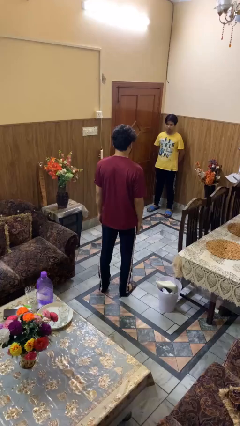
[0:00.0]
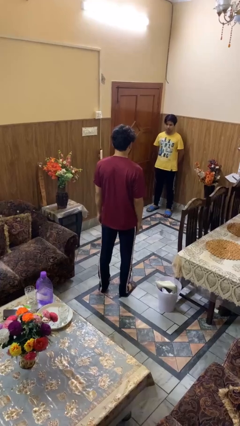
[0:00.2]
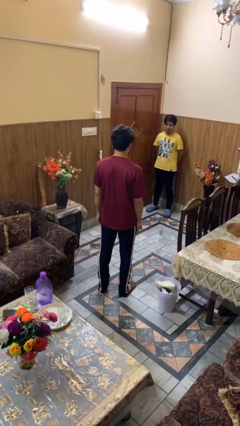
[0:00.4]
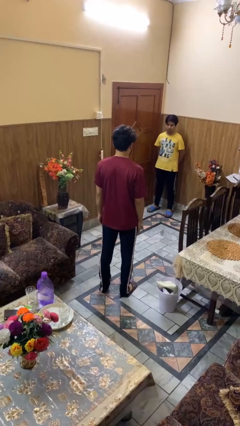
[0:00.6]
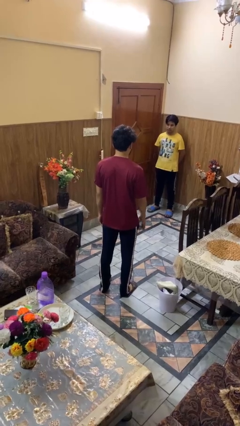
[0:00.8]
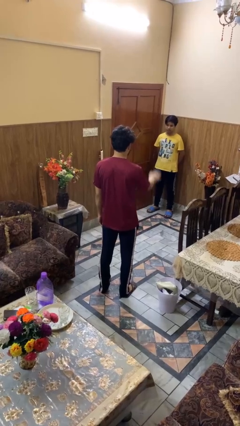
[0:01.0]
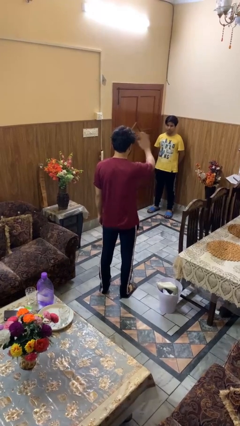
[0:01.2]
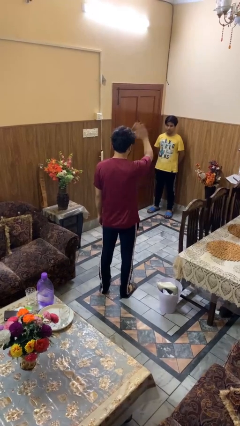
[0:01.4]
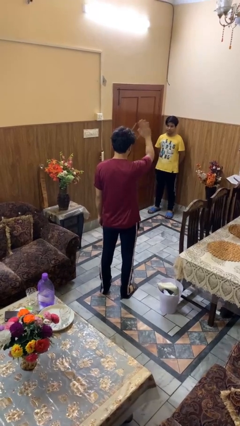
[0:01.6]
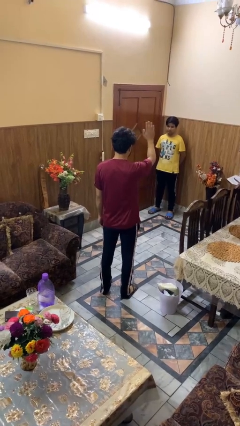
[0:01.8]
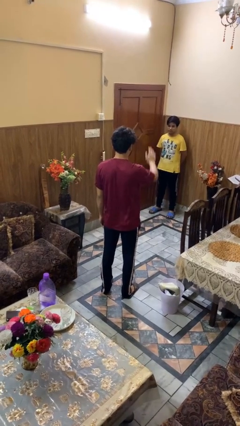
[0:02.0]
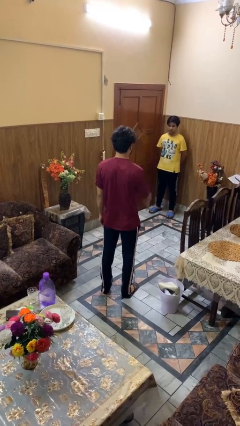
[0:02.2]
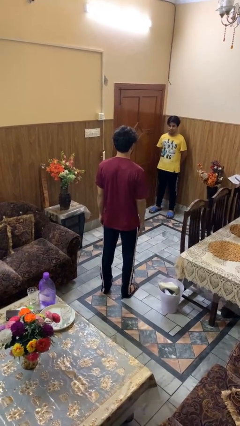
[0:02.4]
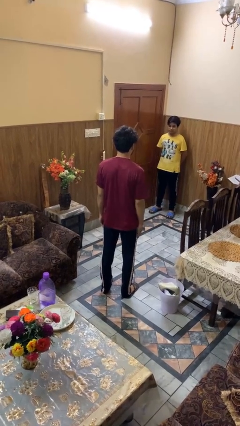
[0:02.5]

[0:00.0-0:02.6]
person waves at person

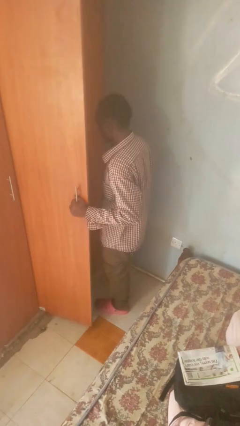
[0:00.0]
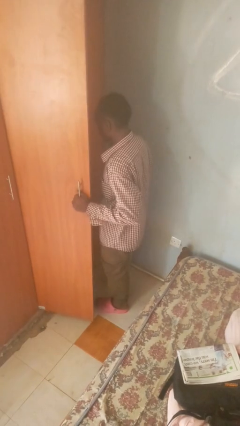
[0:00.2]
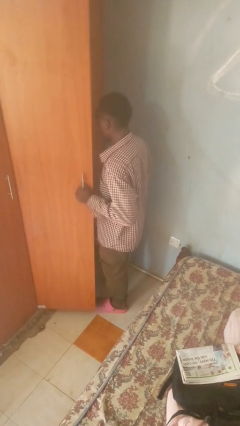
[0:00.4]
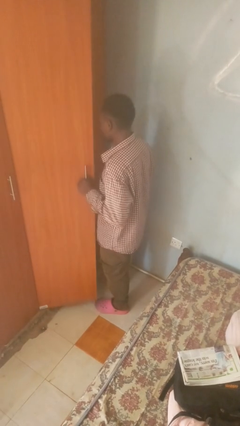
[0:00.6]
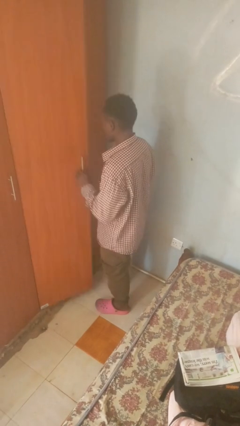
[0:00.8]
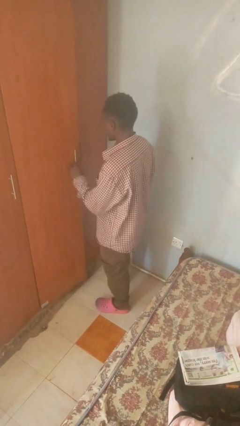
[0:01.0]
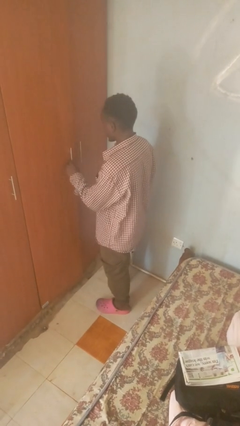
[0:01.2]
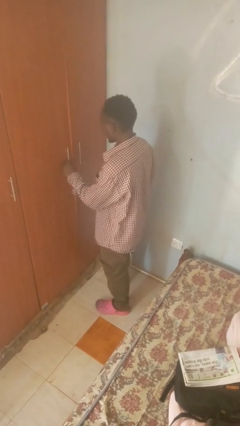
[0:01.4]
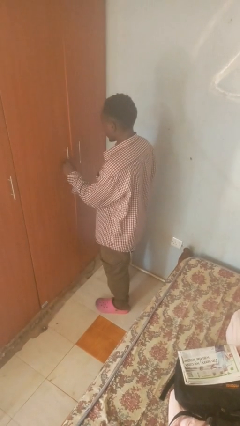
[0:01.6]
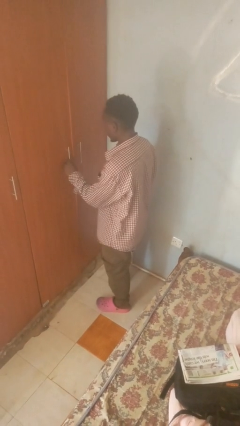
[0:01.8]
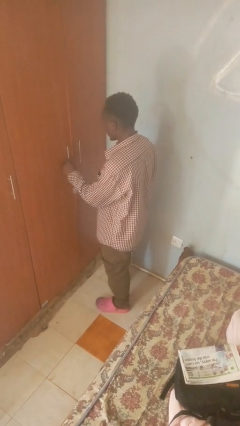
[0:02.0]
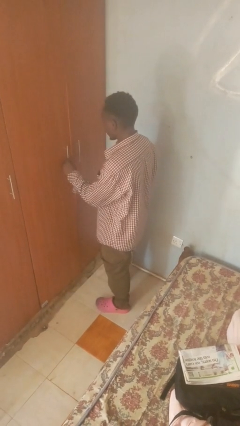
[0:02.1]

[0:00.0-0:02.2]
person closes closet door

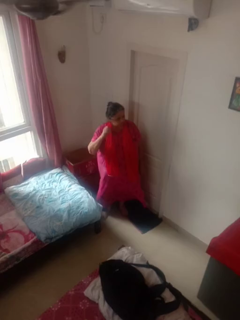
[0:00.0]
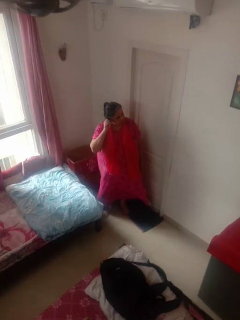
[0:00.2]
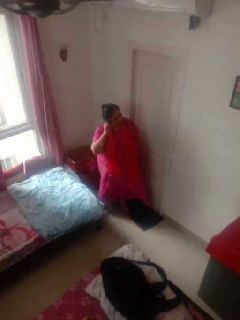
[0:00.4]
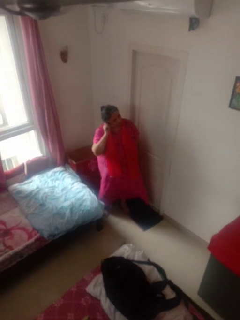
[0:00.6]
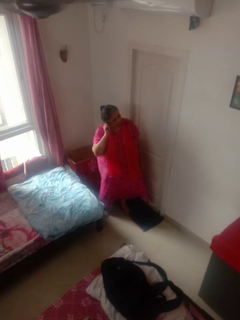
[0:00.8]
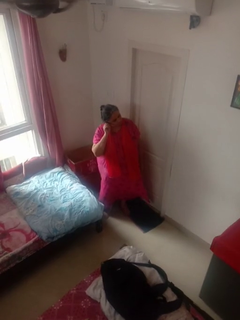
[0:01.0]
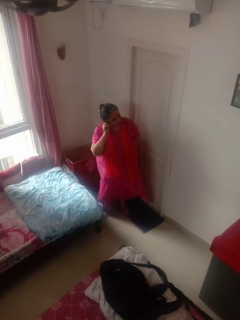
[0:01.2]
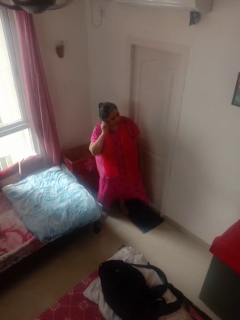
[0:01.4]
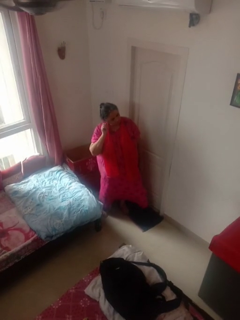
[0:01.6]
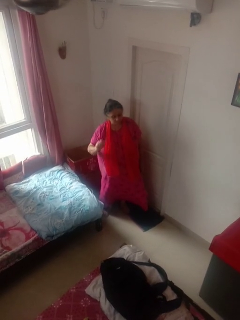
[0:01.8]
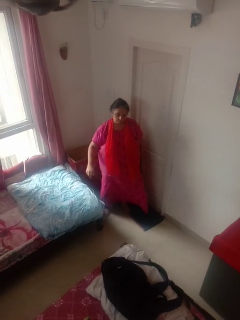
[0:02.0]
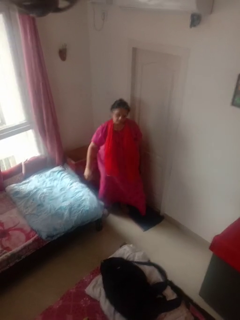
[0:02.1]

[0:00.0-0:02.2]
person touches earlobe

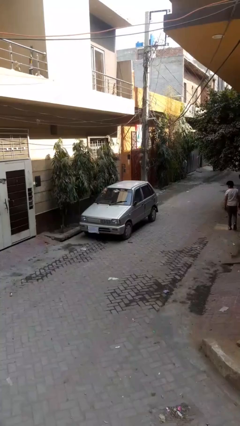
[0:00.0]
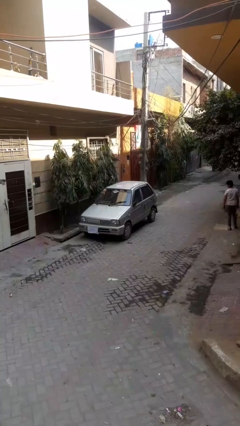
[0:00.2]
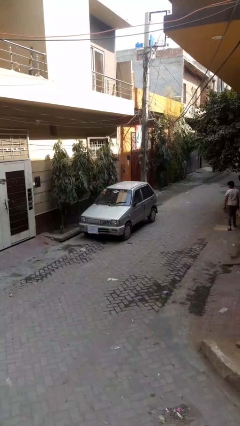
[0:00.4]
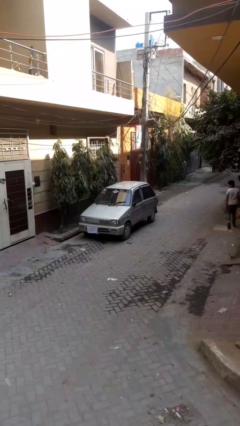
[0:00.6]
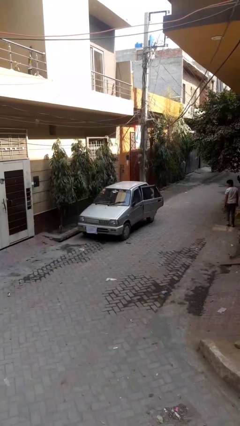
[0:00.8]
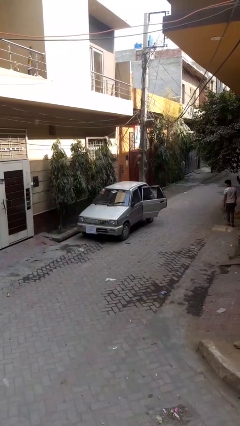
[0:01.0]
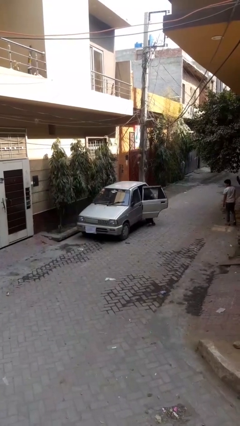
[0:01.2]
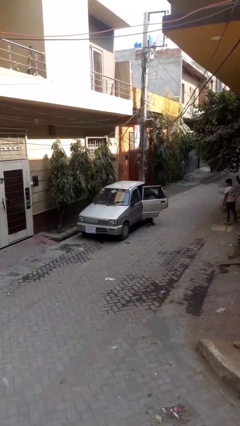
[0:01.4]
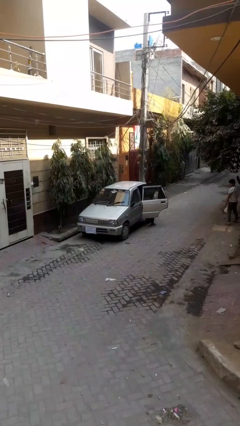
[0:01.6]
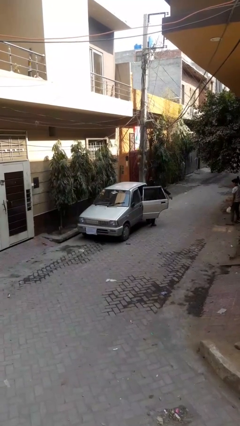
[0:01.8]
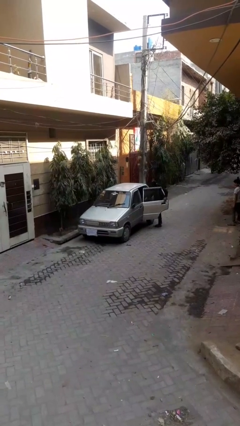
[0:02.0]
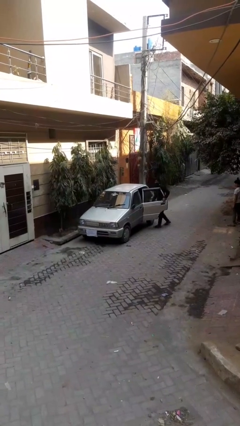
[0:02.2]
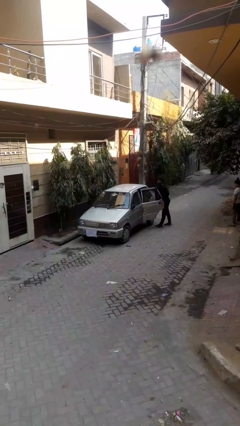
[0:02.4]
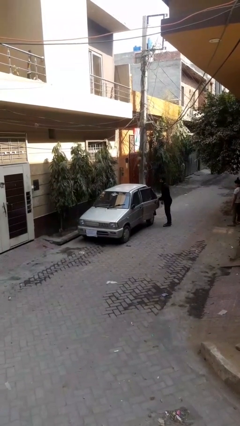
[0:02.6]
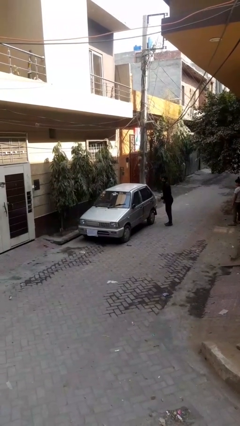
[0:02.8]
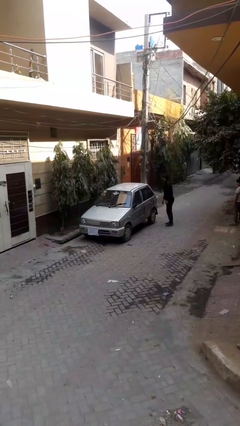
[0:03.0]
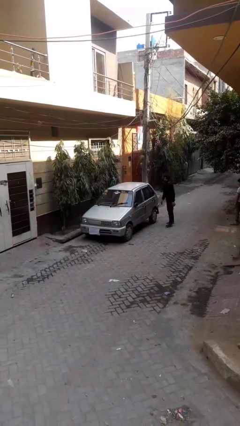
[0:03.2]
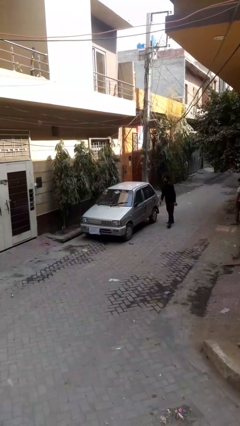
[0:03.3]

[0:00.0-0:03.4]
car drops off person

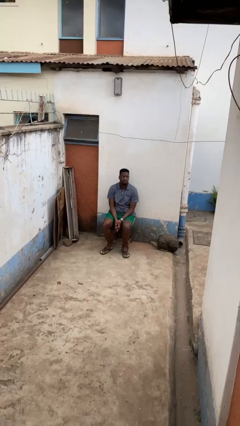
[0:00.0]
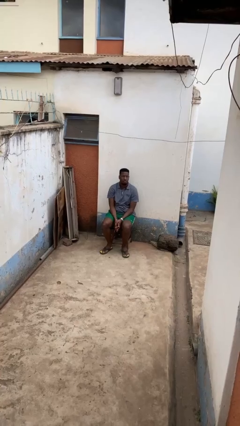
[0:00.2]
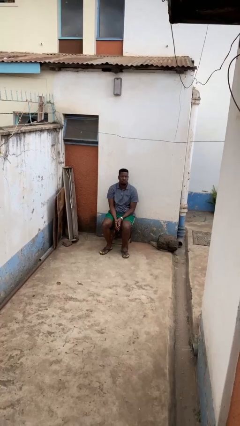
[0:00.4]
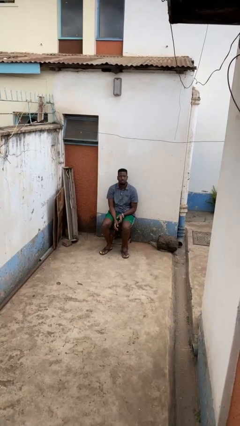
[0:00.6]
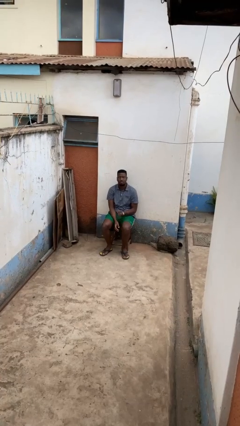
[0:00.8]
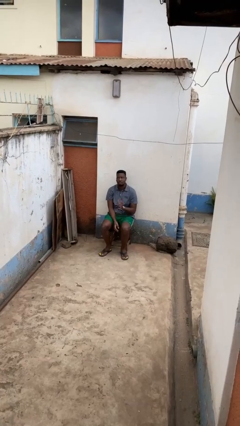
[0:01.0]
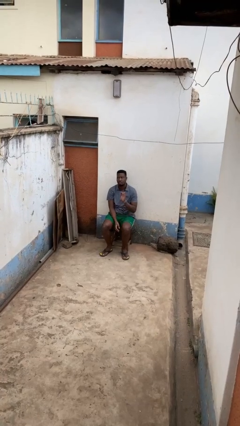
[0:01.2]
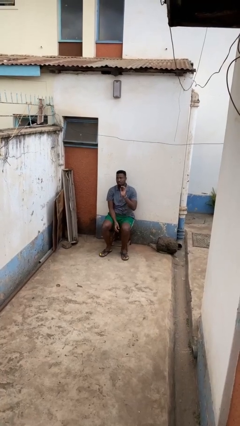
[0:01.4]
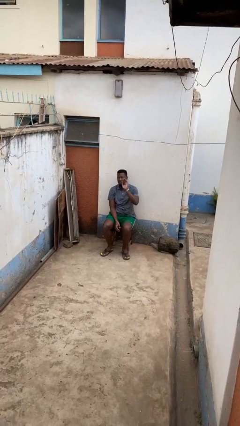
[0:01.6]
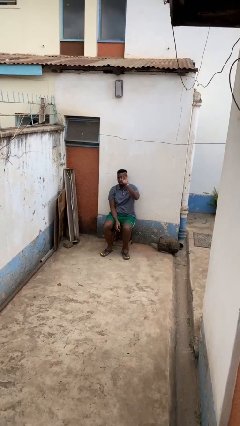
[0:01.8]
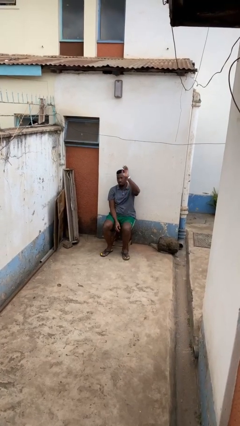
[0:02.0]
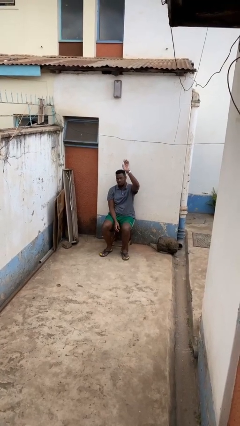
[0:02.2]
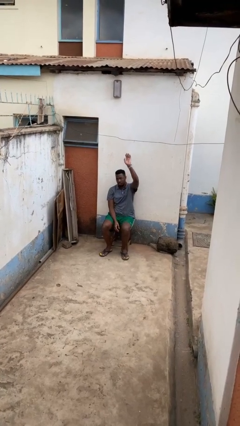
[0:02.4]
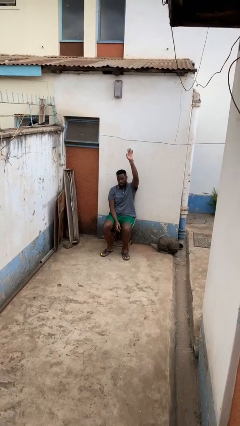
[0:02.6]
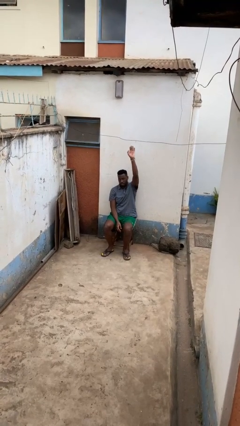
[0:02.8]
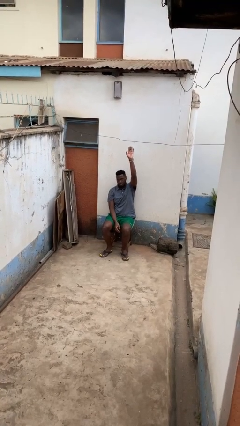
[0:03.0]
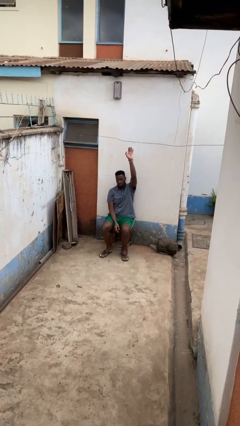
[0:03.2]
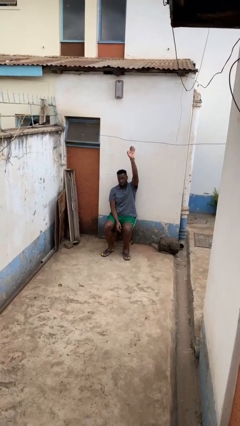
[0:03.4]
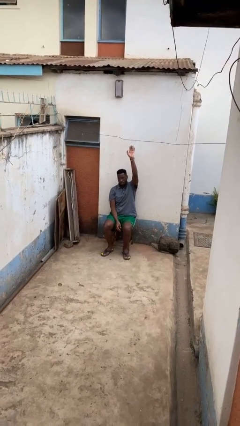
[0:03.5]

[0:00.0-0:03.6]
person gestures raise hand

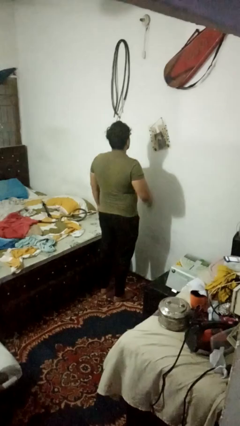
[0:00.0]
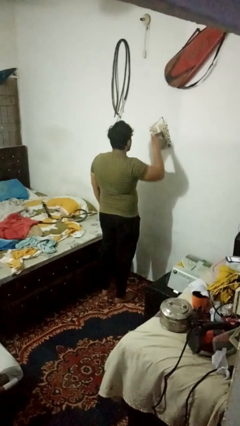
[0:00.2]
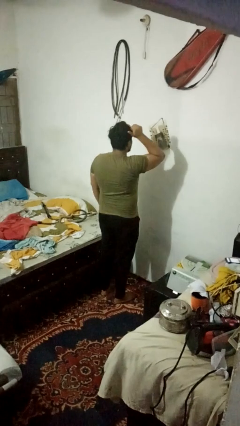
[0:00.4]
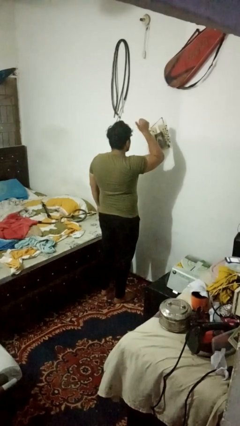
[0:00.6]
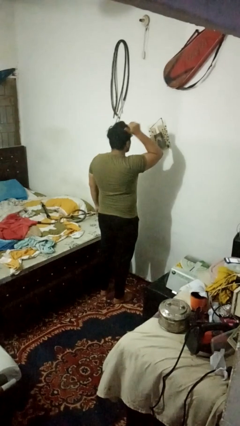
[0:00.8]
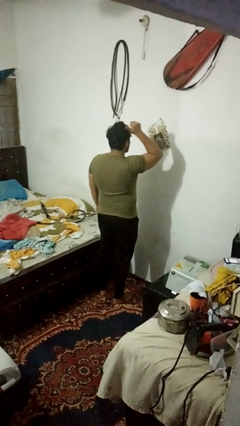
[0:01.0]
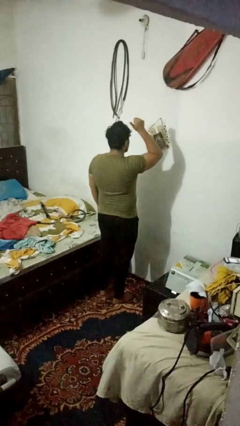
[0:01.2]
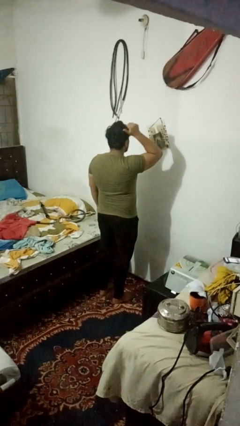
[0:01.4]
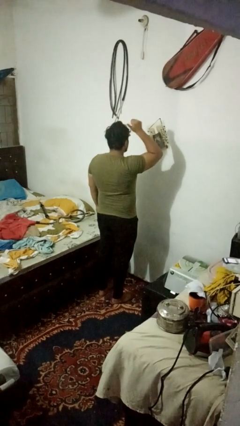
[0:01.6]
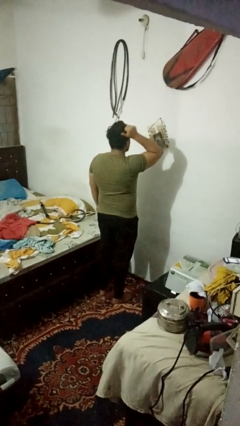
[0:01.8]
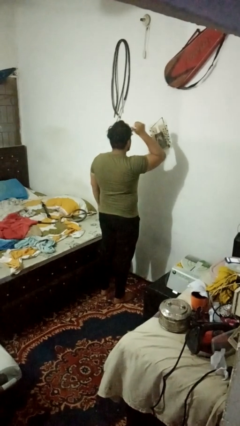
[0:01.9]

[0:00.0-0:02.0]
person gestures behind me

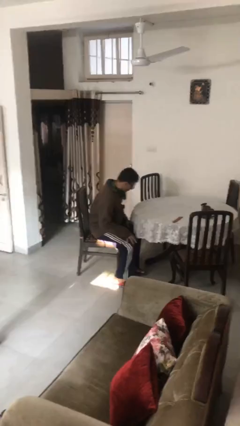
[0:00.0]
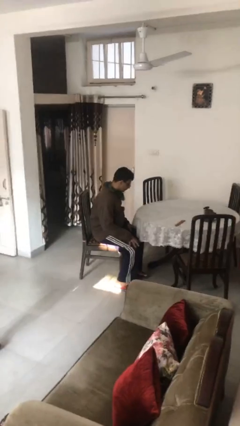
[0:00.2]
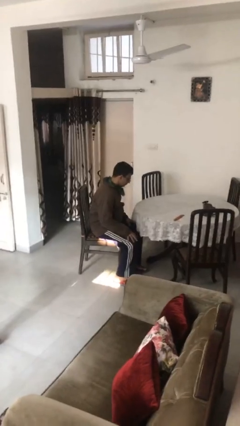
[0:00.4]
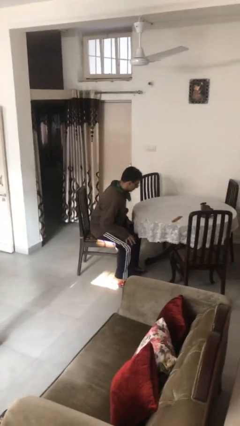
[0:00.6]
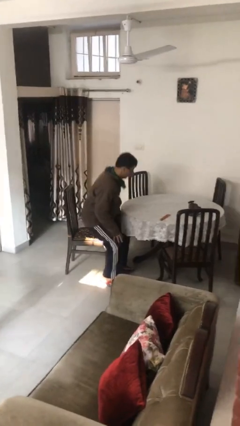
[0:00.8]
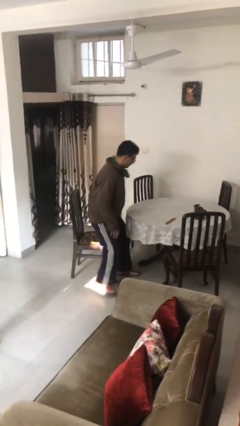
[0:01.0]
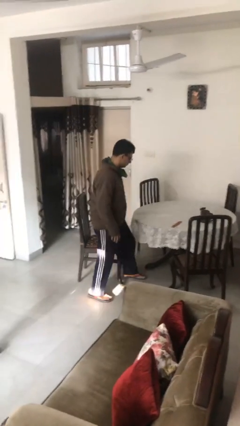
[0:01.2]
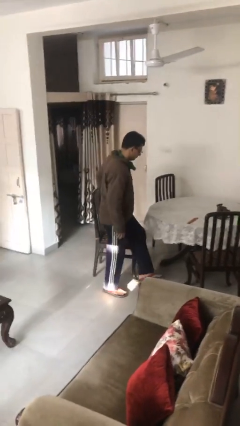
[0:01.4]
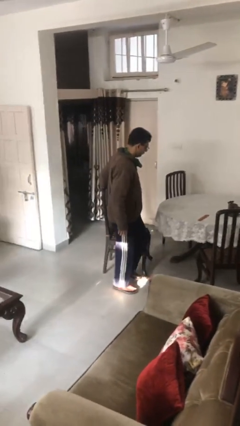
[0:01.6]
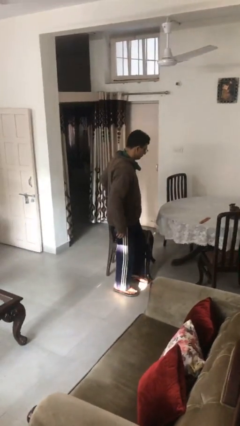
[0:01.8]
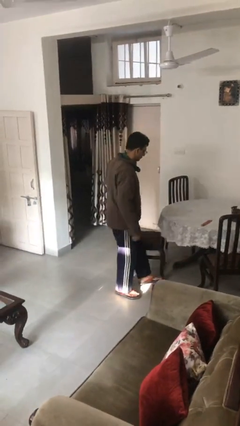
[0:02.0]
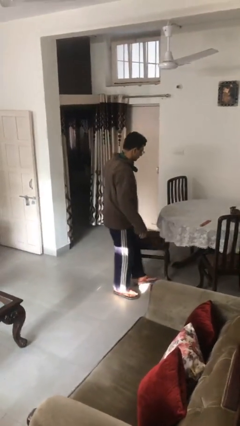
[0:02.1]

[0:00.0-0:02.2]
person stands up
